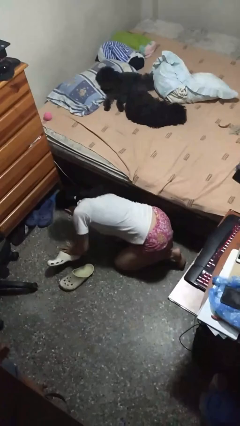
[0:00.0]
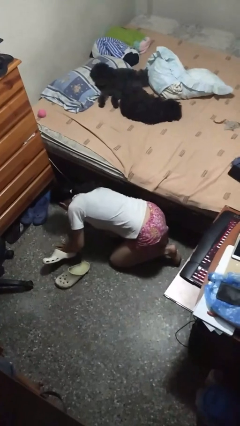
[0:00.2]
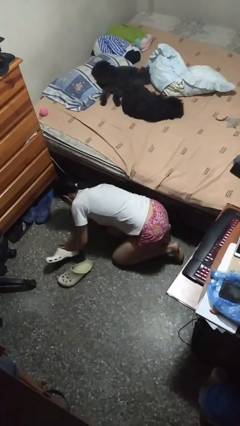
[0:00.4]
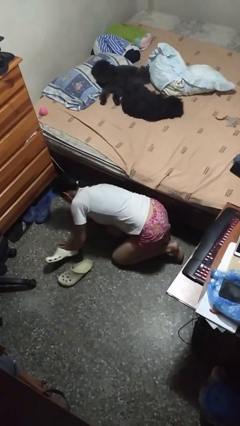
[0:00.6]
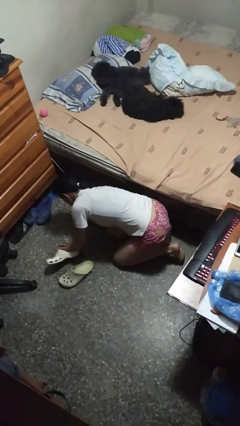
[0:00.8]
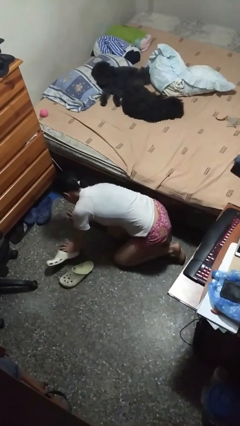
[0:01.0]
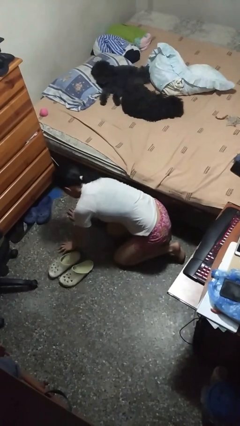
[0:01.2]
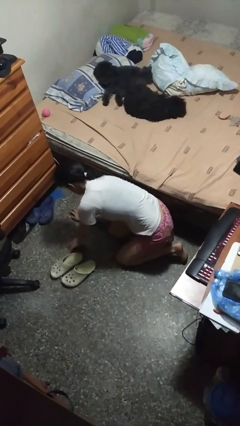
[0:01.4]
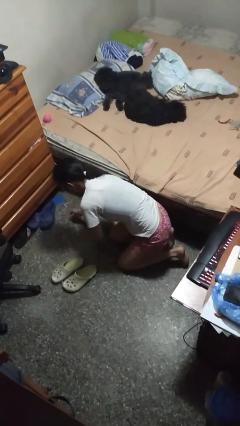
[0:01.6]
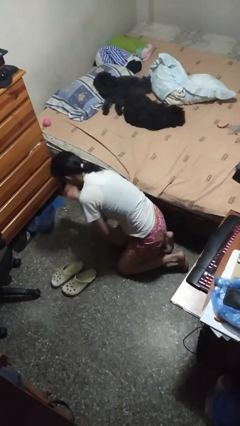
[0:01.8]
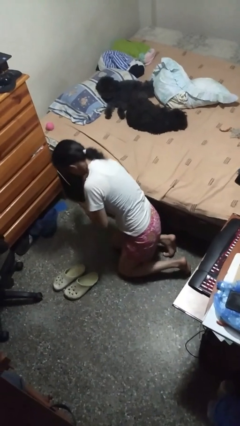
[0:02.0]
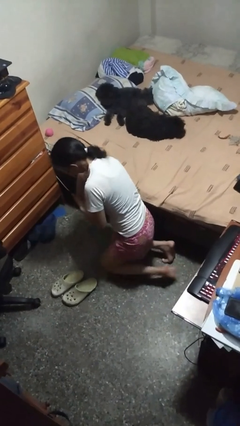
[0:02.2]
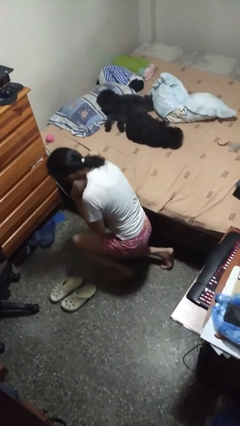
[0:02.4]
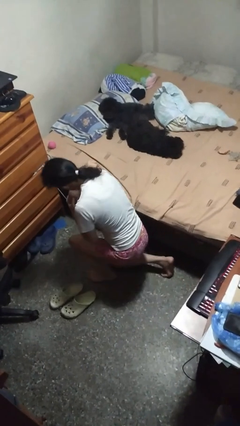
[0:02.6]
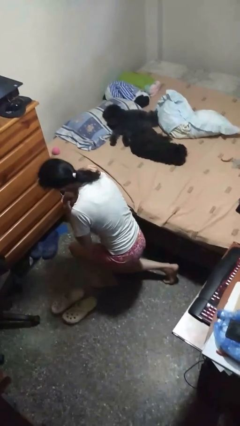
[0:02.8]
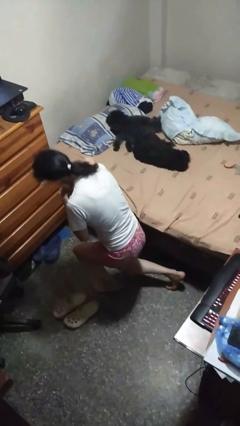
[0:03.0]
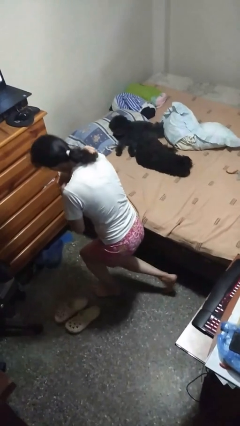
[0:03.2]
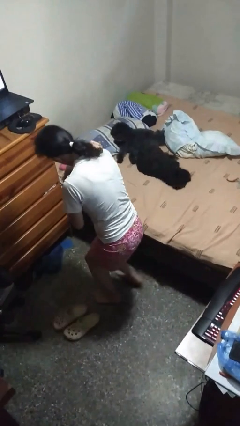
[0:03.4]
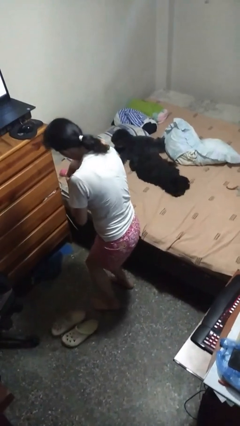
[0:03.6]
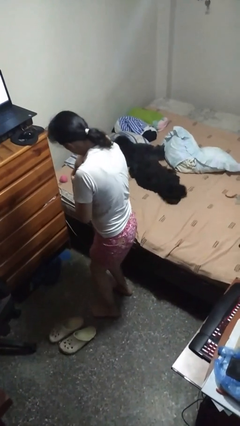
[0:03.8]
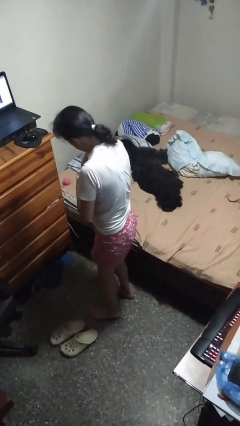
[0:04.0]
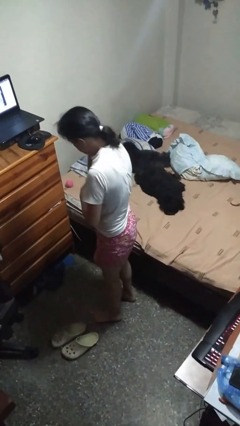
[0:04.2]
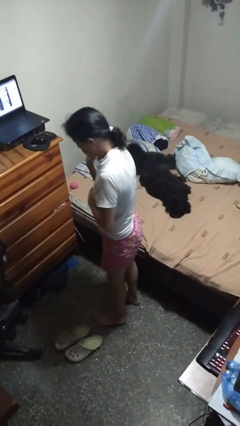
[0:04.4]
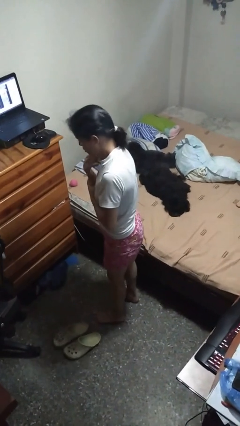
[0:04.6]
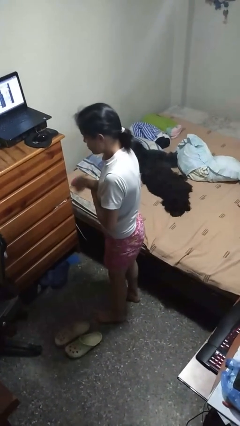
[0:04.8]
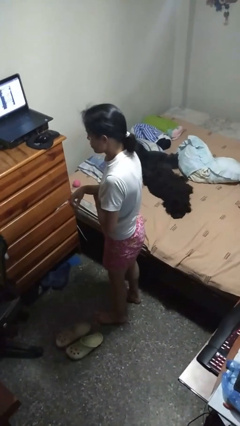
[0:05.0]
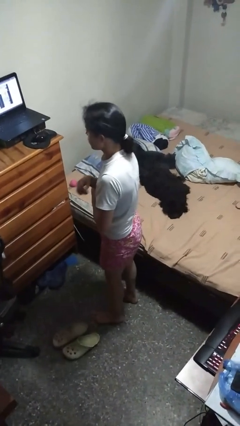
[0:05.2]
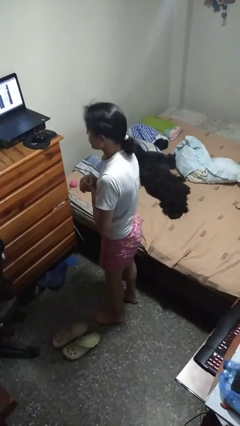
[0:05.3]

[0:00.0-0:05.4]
person stands up from floor

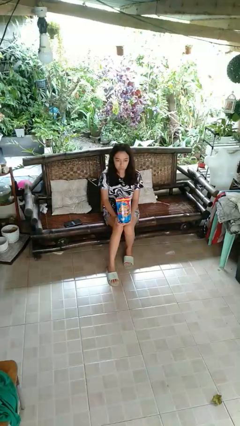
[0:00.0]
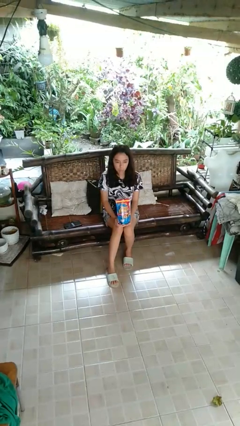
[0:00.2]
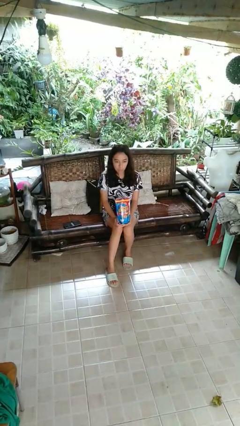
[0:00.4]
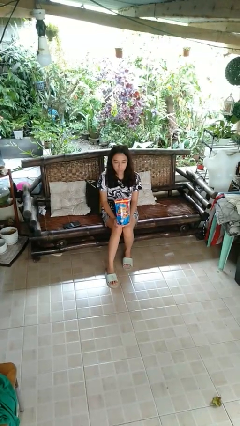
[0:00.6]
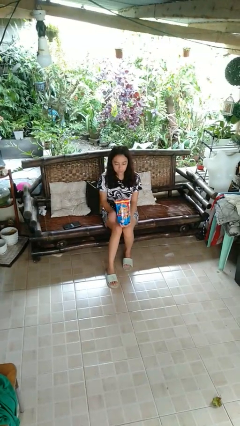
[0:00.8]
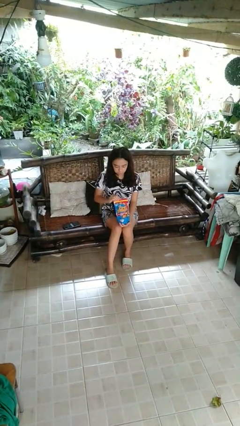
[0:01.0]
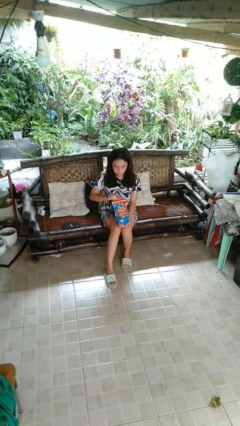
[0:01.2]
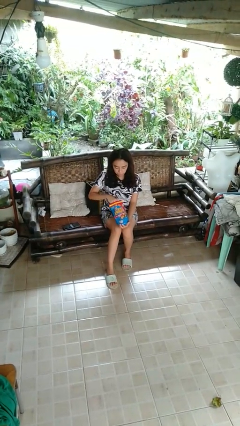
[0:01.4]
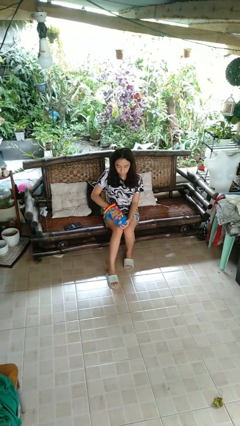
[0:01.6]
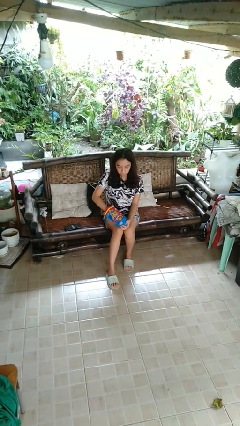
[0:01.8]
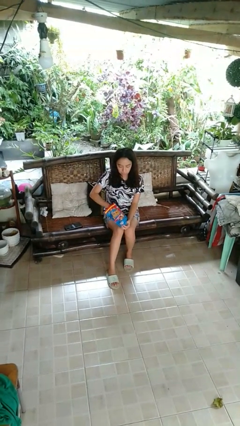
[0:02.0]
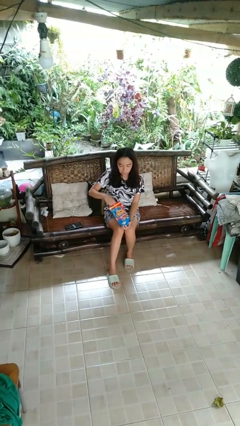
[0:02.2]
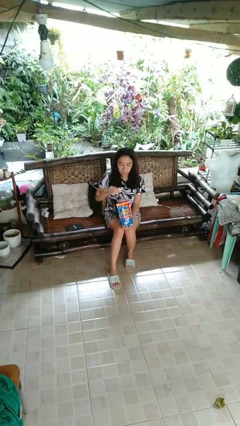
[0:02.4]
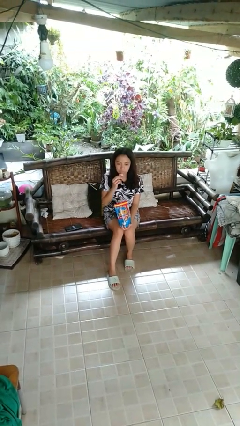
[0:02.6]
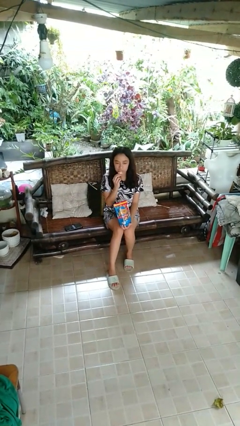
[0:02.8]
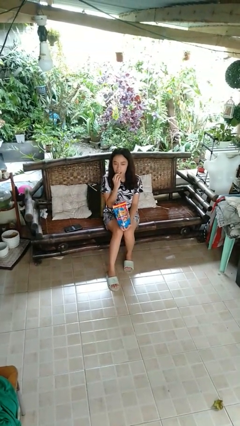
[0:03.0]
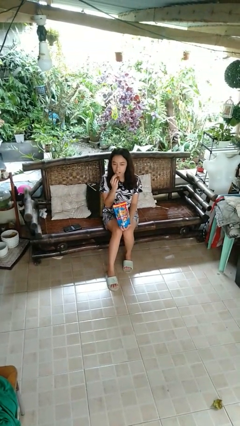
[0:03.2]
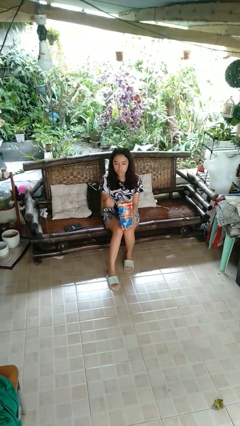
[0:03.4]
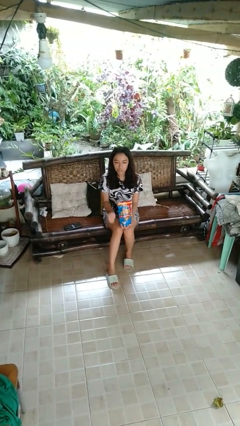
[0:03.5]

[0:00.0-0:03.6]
person eats snack from bag

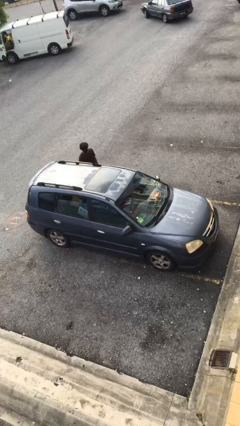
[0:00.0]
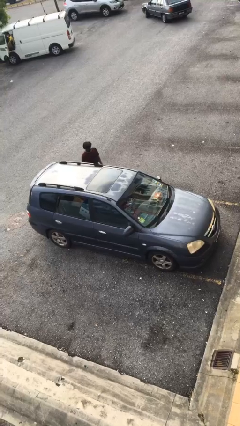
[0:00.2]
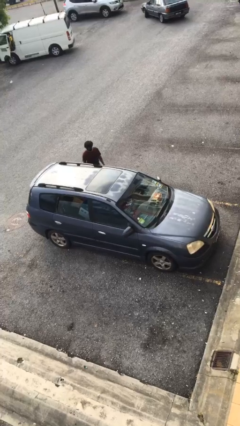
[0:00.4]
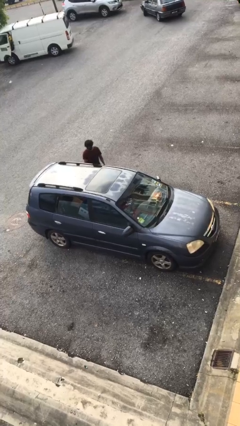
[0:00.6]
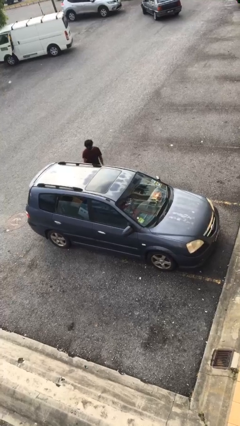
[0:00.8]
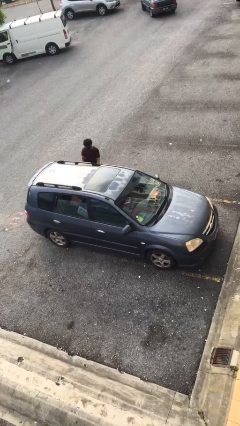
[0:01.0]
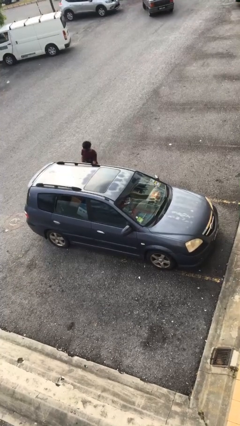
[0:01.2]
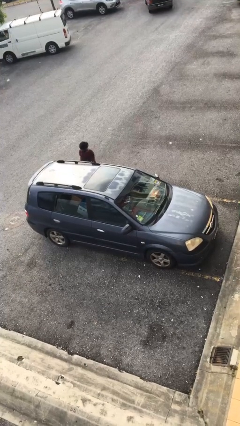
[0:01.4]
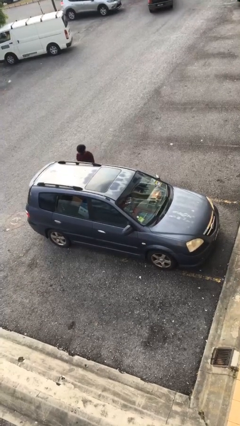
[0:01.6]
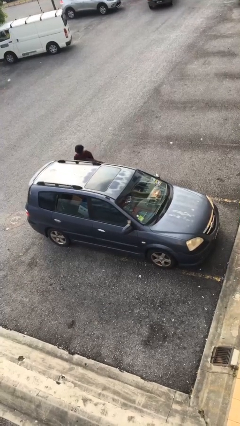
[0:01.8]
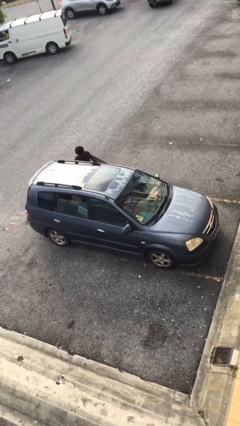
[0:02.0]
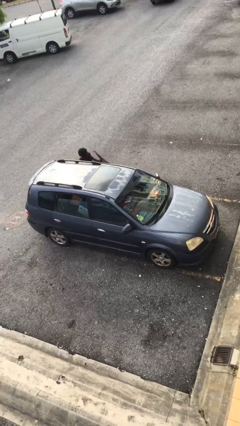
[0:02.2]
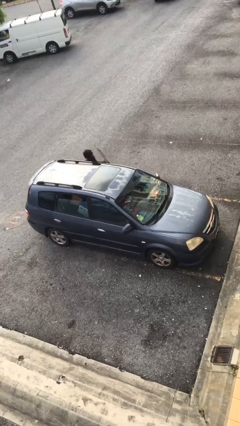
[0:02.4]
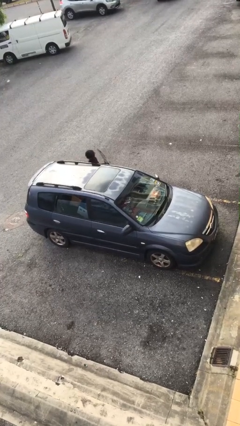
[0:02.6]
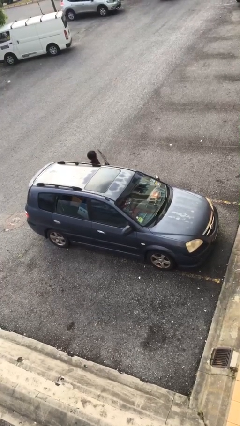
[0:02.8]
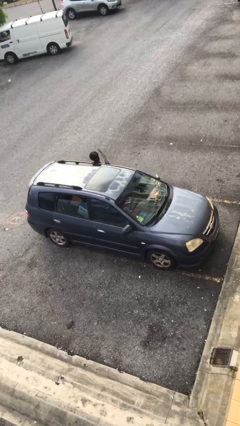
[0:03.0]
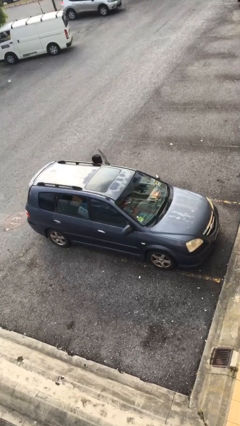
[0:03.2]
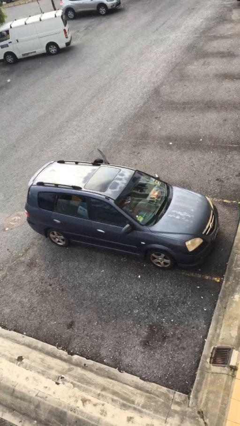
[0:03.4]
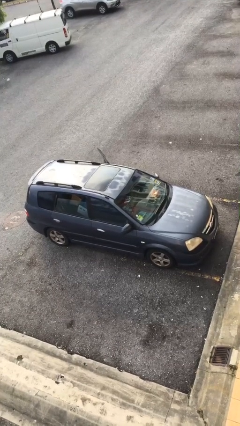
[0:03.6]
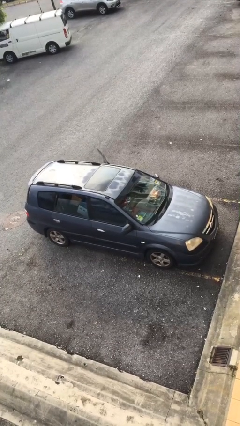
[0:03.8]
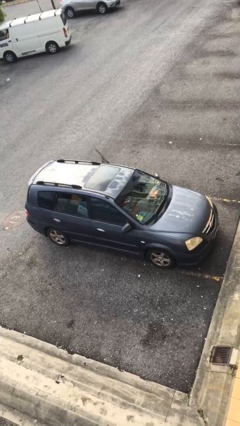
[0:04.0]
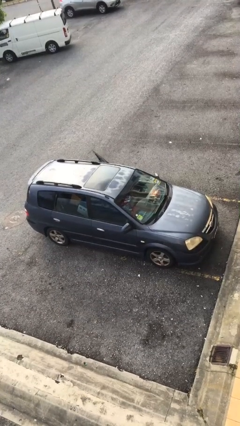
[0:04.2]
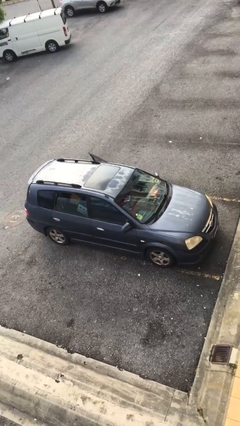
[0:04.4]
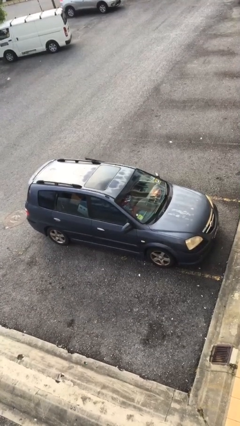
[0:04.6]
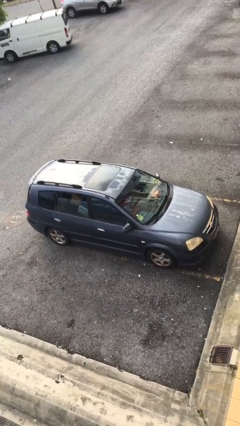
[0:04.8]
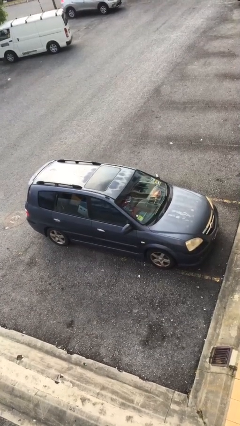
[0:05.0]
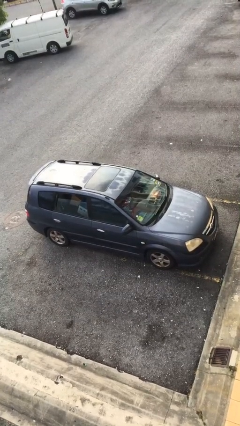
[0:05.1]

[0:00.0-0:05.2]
car picks up person

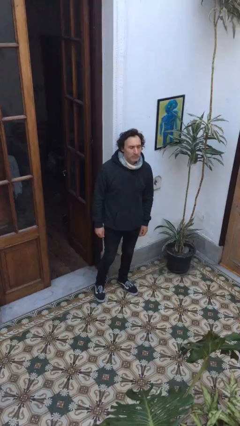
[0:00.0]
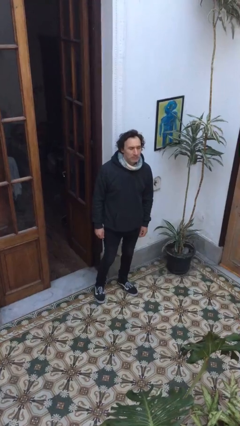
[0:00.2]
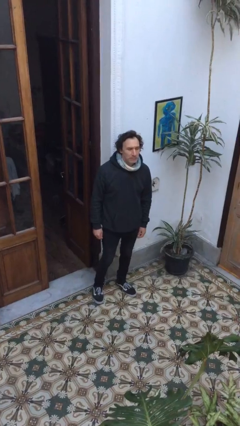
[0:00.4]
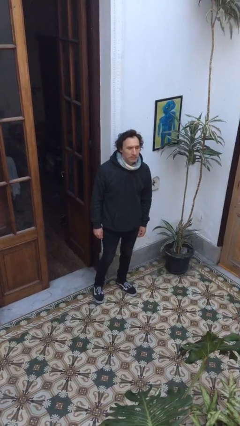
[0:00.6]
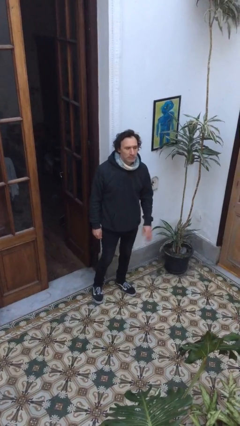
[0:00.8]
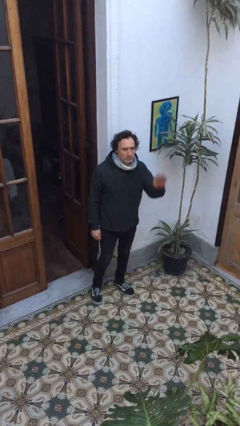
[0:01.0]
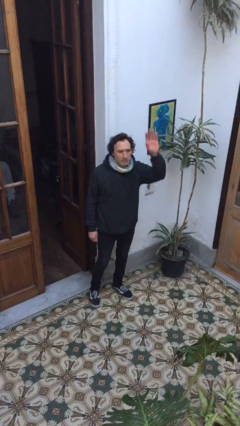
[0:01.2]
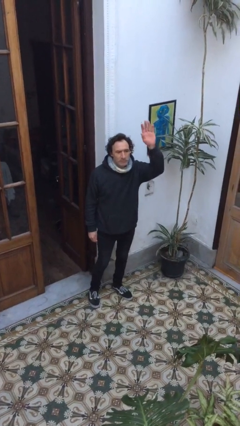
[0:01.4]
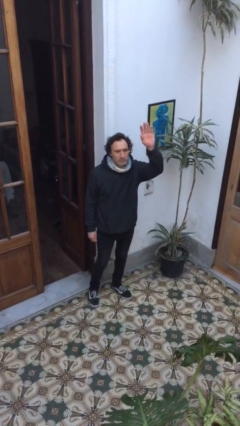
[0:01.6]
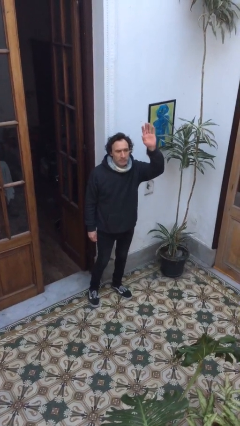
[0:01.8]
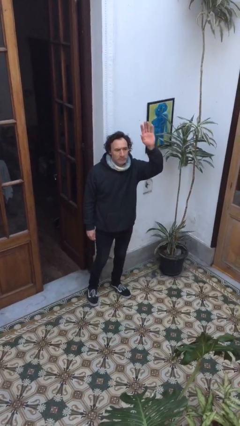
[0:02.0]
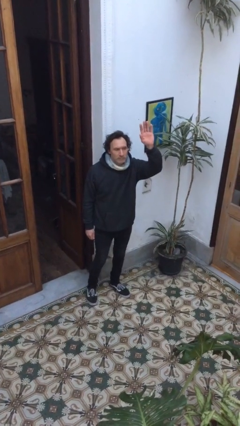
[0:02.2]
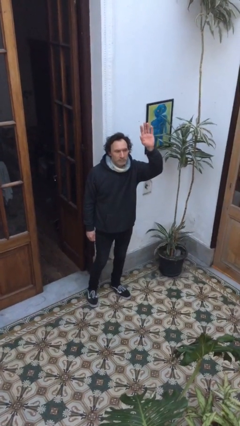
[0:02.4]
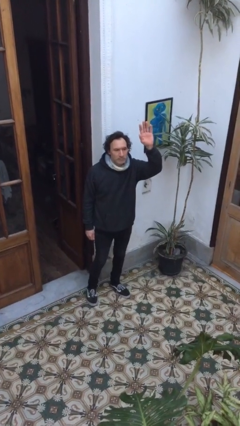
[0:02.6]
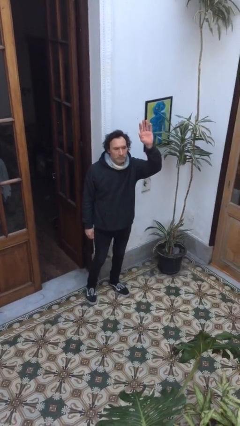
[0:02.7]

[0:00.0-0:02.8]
person gestures raise hand

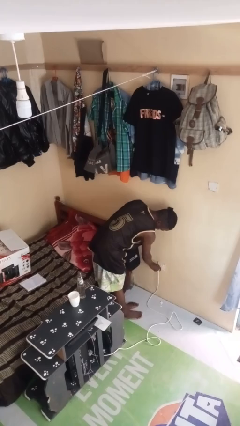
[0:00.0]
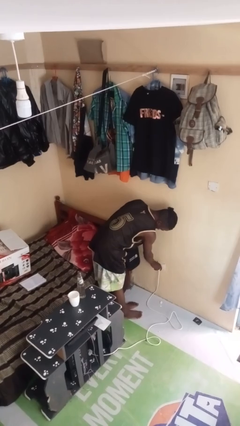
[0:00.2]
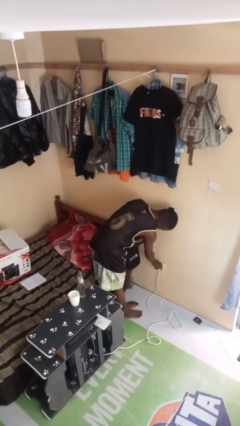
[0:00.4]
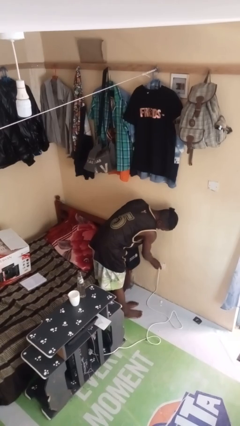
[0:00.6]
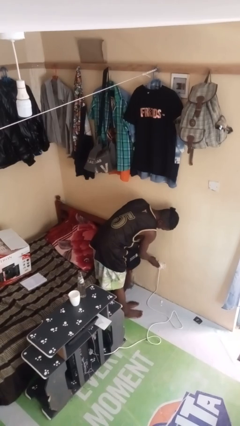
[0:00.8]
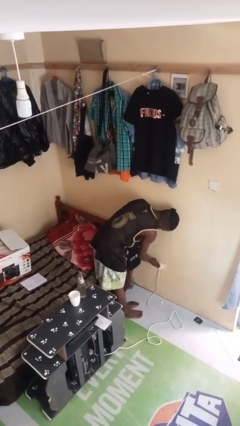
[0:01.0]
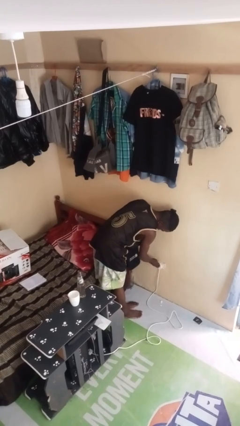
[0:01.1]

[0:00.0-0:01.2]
person plugs into electrical socket
